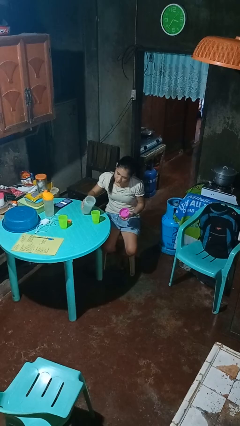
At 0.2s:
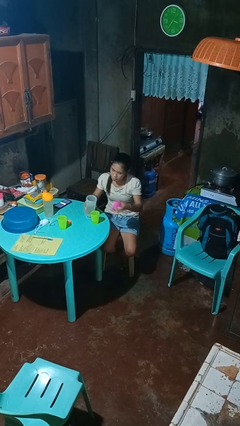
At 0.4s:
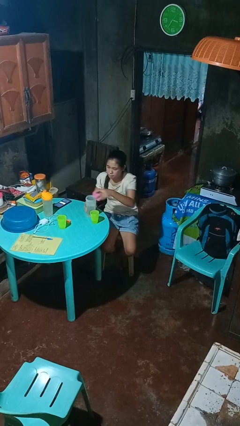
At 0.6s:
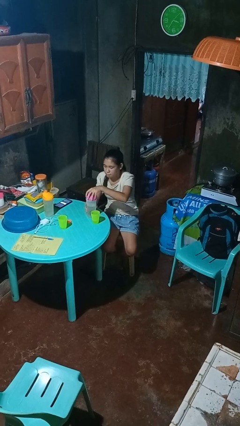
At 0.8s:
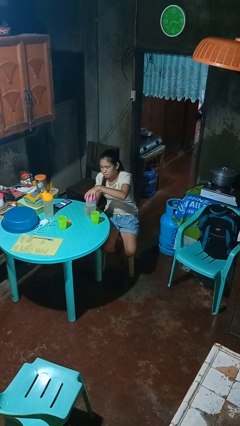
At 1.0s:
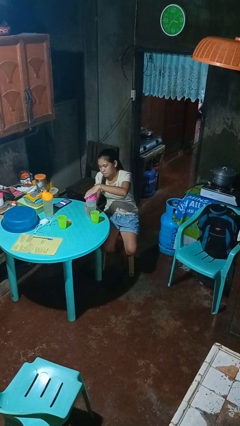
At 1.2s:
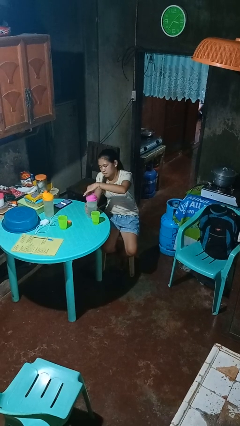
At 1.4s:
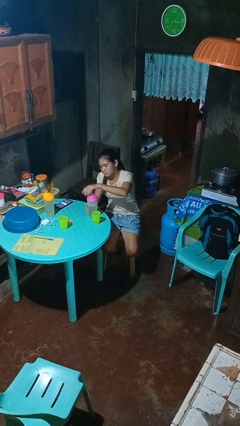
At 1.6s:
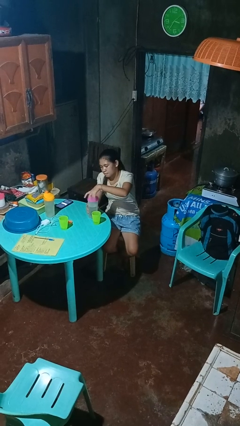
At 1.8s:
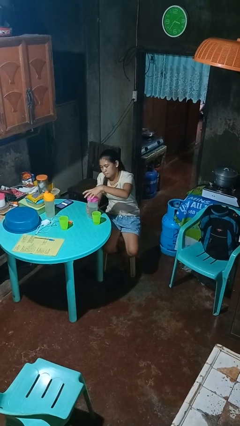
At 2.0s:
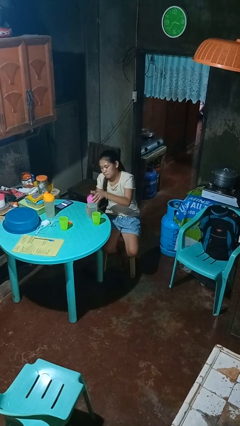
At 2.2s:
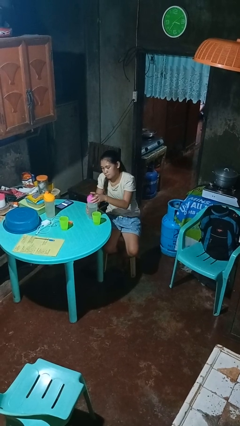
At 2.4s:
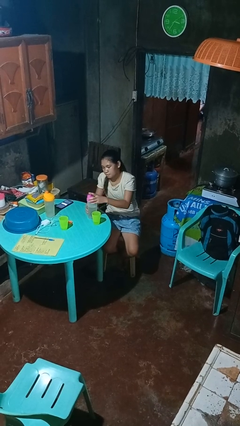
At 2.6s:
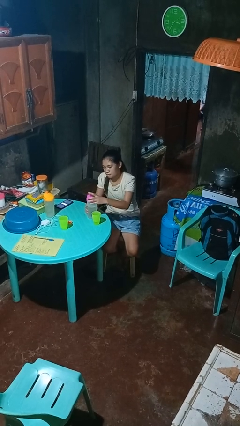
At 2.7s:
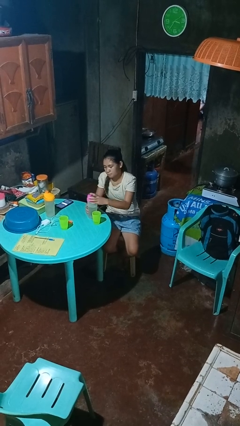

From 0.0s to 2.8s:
person screws lid to bottle

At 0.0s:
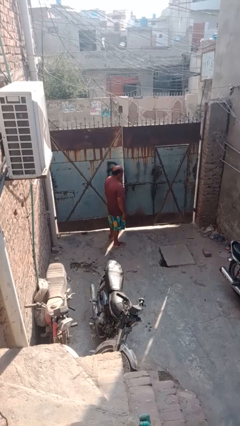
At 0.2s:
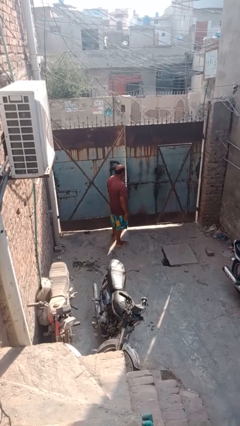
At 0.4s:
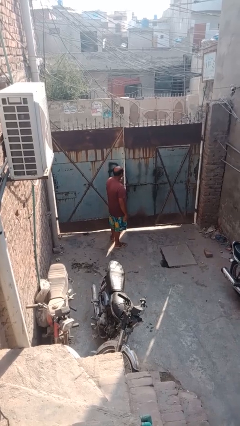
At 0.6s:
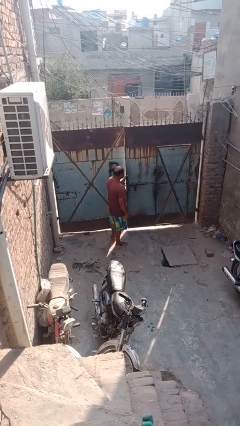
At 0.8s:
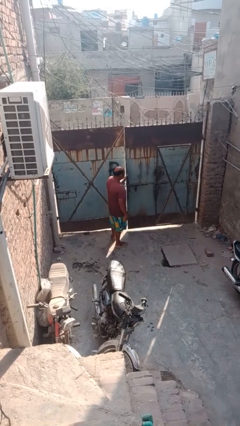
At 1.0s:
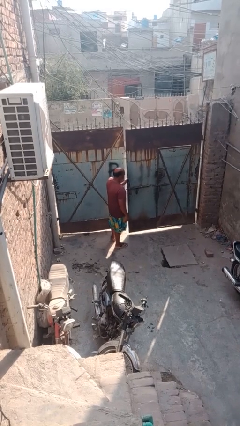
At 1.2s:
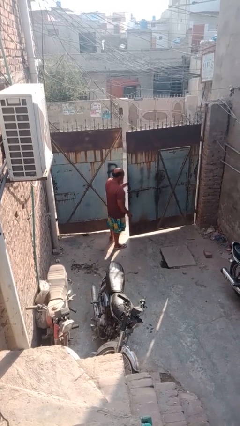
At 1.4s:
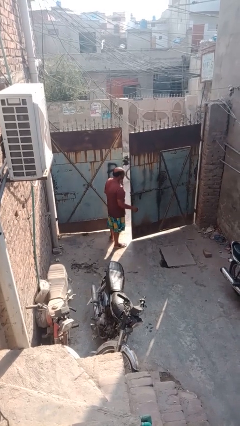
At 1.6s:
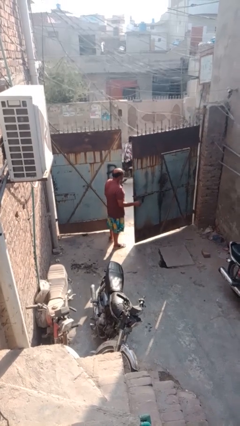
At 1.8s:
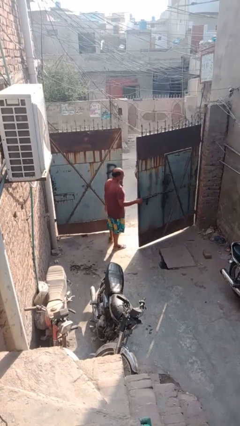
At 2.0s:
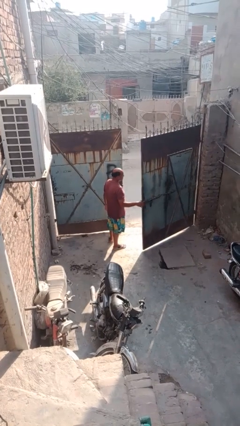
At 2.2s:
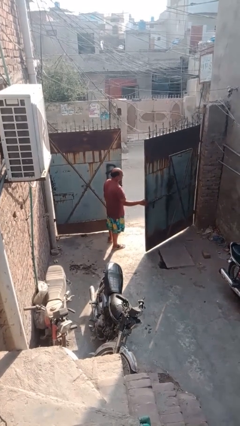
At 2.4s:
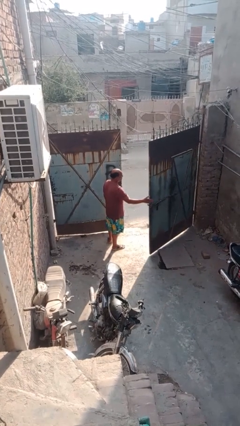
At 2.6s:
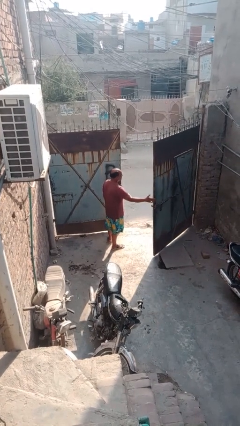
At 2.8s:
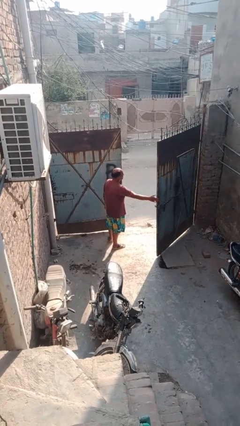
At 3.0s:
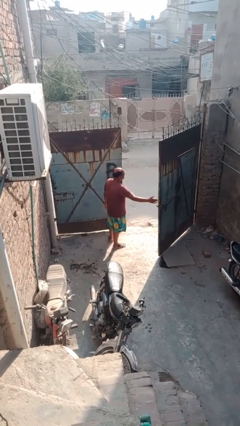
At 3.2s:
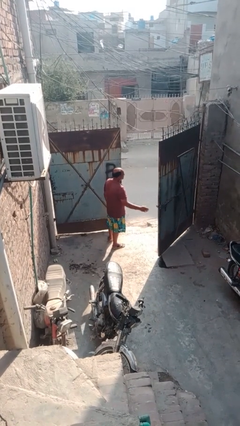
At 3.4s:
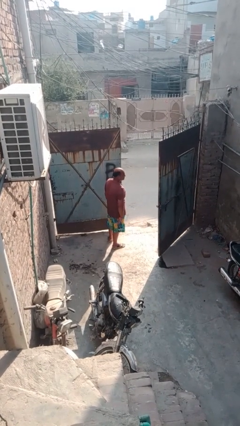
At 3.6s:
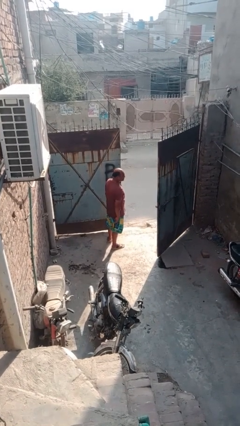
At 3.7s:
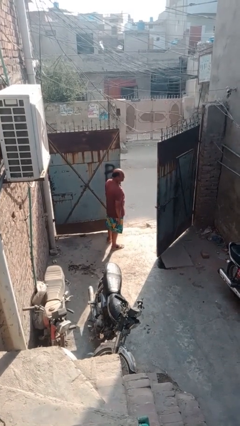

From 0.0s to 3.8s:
person opens gate

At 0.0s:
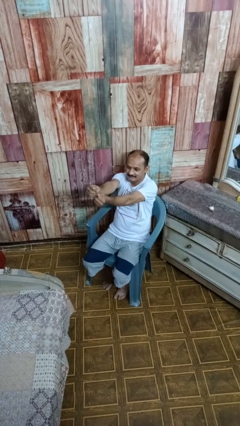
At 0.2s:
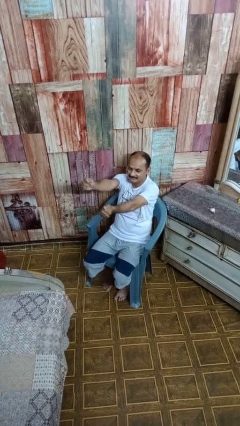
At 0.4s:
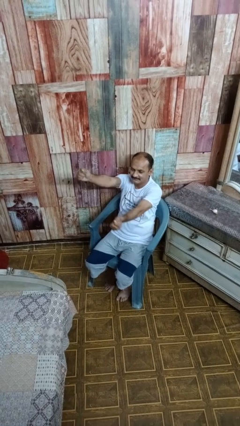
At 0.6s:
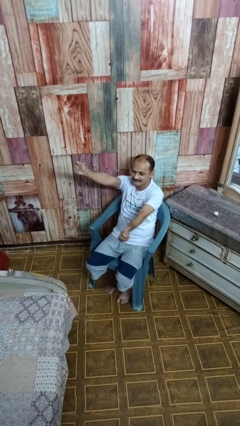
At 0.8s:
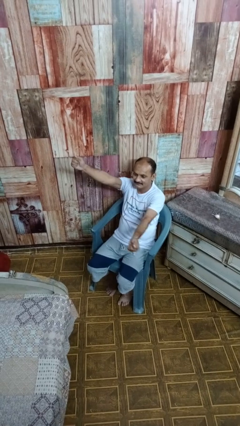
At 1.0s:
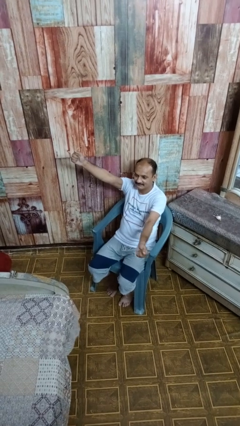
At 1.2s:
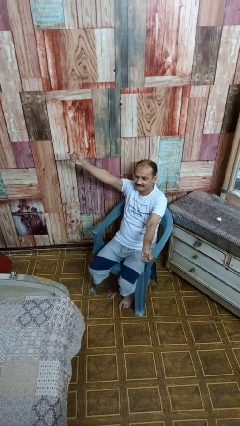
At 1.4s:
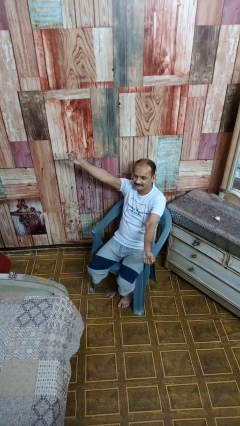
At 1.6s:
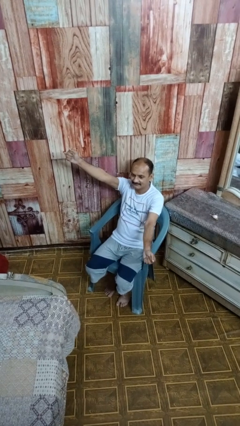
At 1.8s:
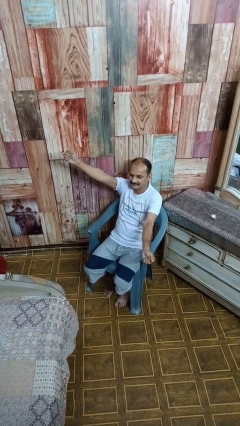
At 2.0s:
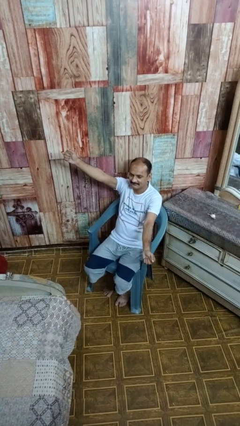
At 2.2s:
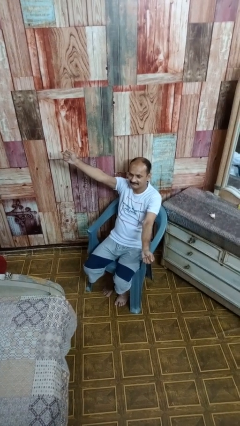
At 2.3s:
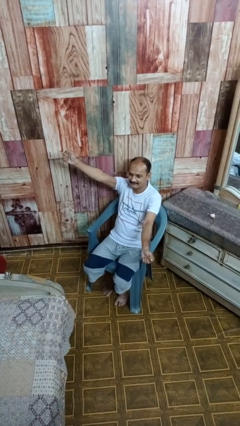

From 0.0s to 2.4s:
person gestures zoom out

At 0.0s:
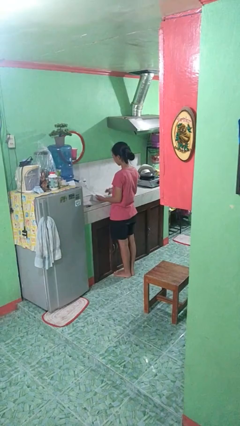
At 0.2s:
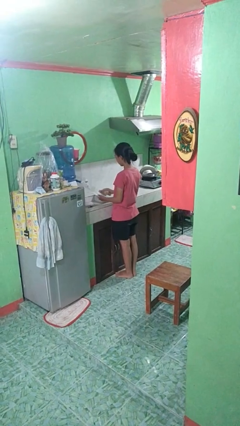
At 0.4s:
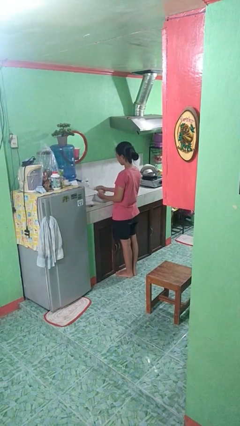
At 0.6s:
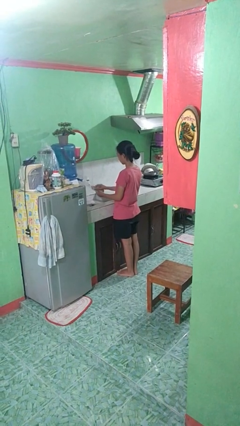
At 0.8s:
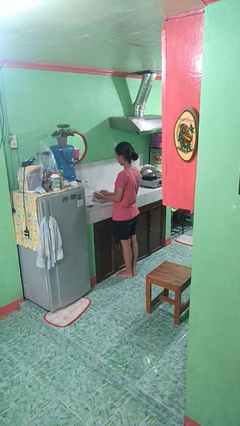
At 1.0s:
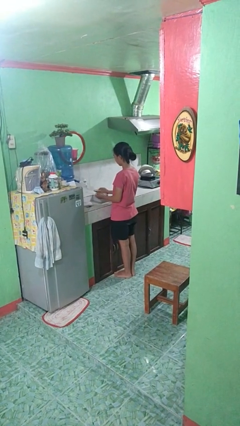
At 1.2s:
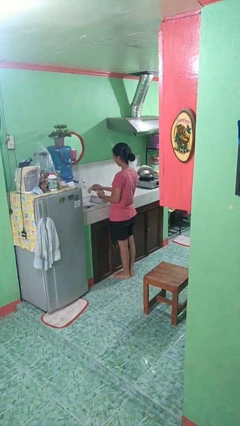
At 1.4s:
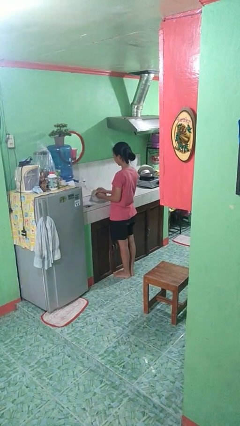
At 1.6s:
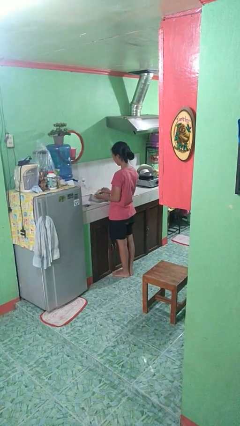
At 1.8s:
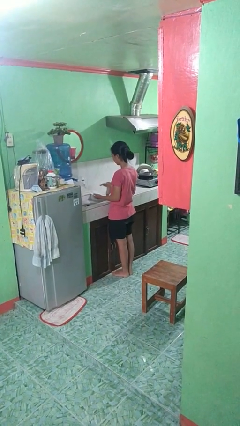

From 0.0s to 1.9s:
person dries dish

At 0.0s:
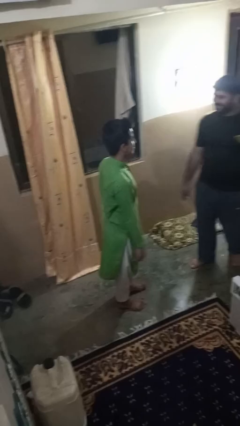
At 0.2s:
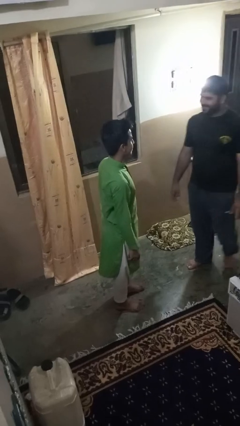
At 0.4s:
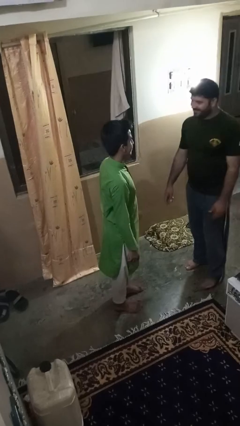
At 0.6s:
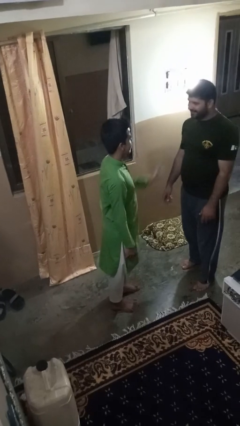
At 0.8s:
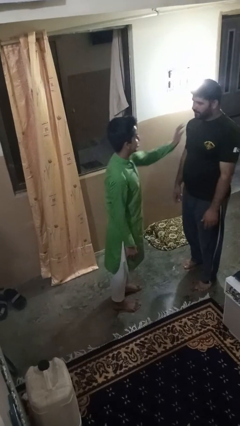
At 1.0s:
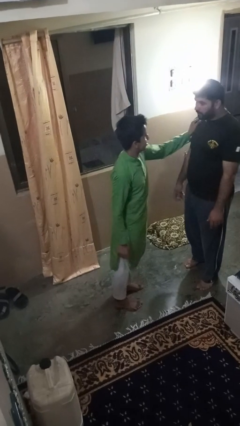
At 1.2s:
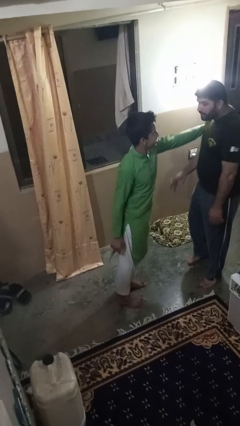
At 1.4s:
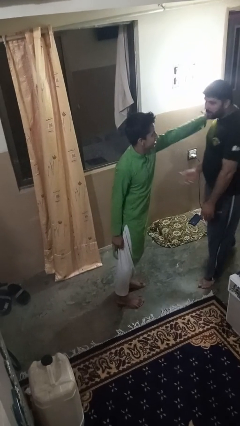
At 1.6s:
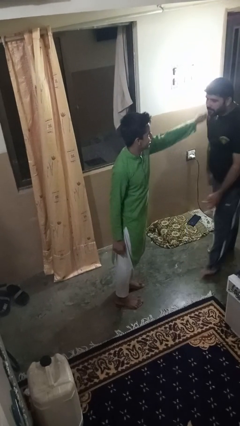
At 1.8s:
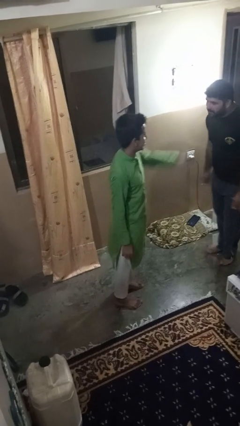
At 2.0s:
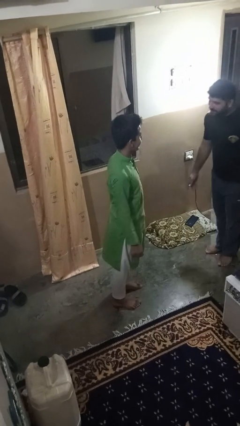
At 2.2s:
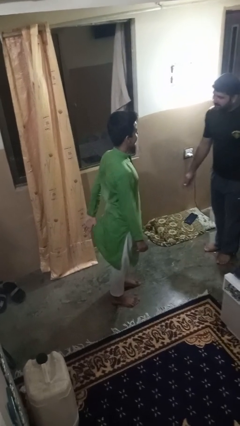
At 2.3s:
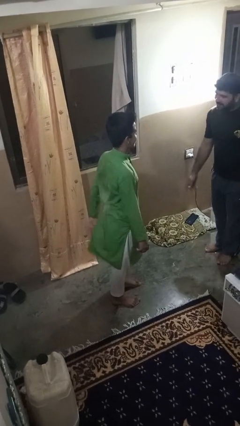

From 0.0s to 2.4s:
person shoves person

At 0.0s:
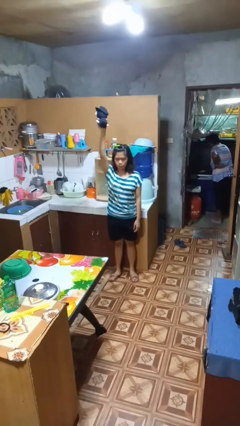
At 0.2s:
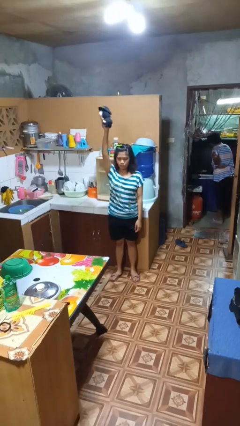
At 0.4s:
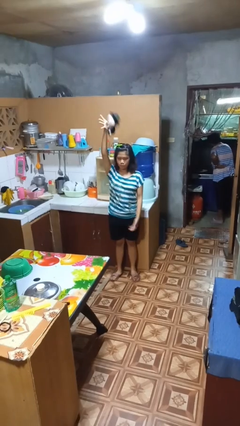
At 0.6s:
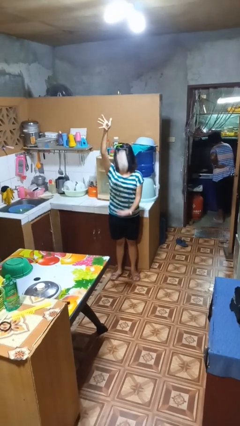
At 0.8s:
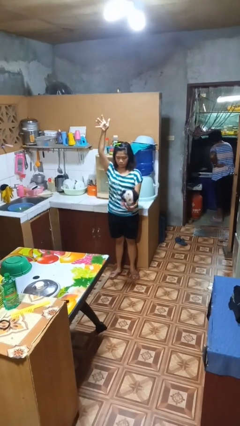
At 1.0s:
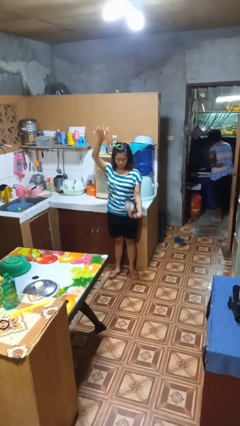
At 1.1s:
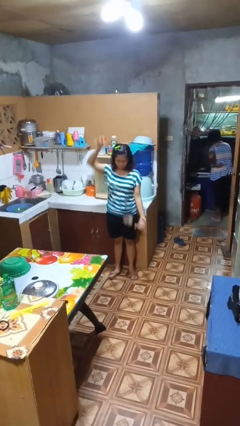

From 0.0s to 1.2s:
person drops object

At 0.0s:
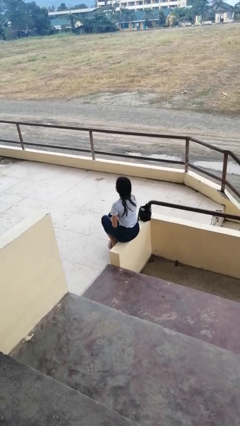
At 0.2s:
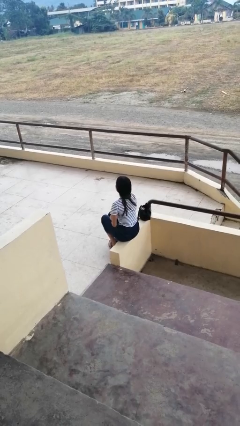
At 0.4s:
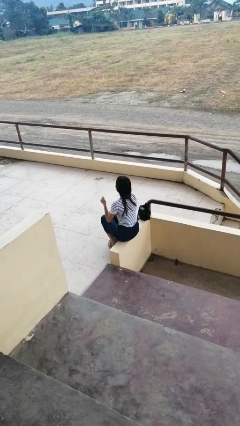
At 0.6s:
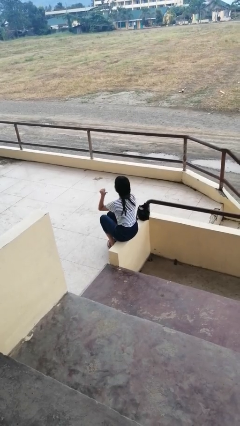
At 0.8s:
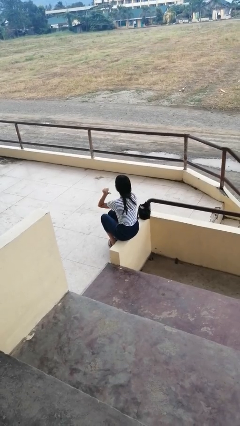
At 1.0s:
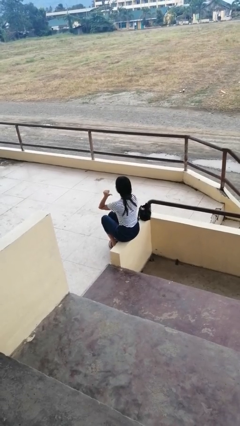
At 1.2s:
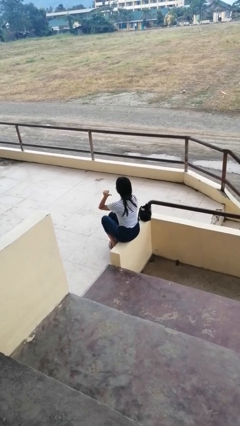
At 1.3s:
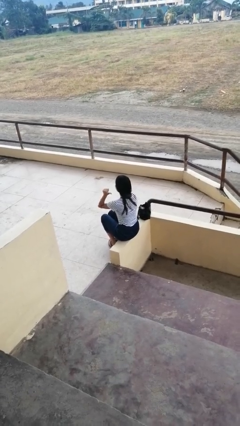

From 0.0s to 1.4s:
person gestures behind me

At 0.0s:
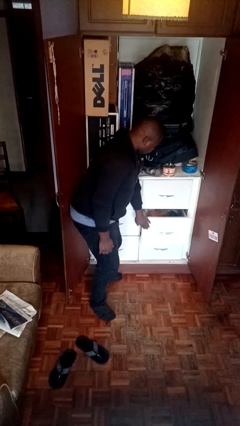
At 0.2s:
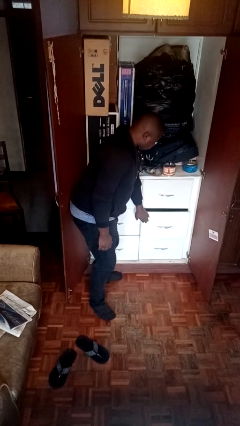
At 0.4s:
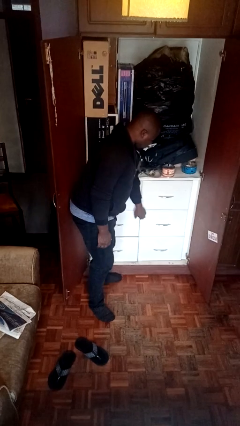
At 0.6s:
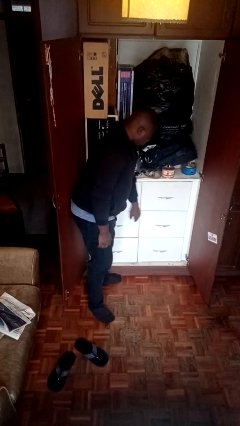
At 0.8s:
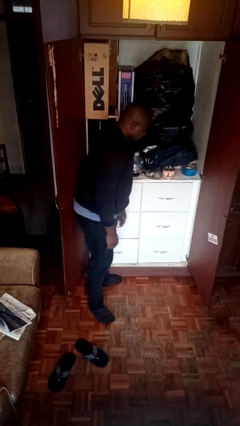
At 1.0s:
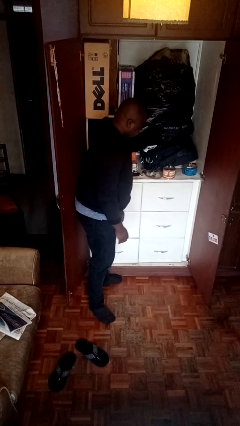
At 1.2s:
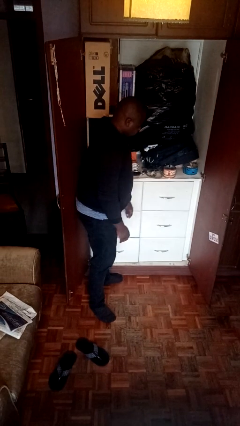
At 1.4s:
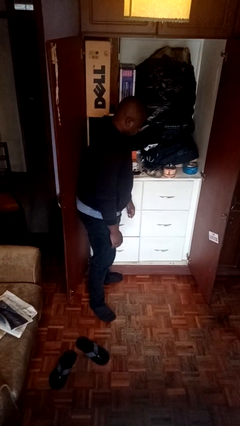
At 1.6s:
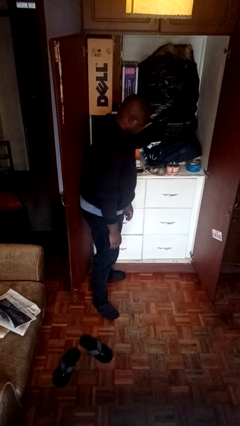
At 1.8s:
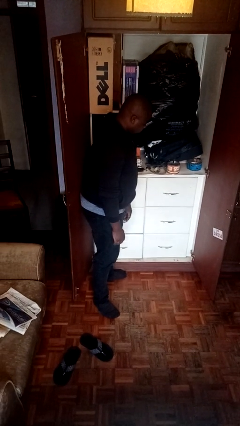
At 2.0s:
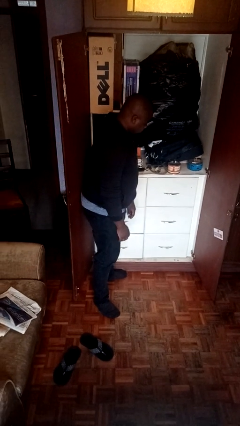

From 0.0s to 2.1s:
person closes dresser drawer
